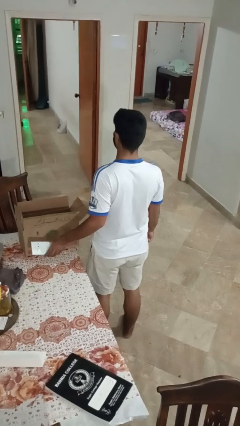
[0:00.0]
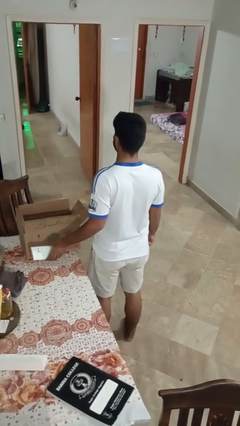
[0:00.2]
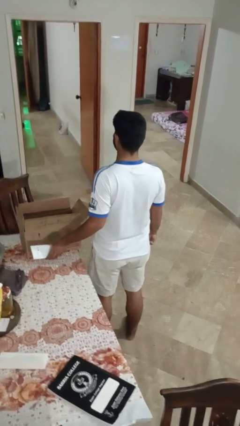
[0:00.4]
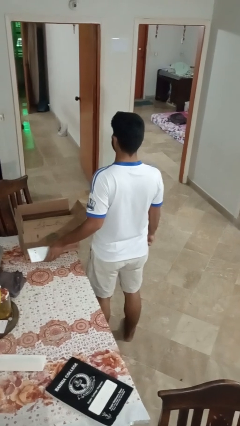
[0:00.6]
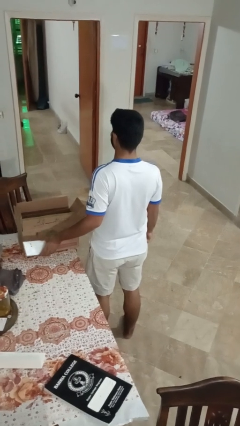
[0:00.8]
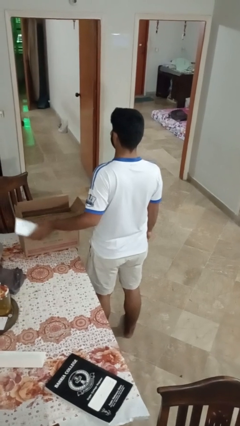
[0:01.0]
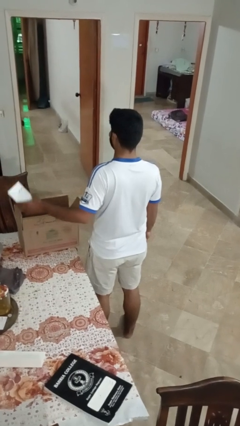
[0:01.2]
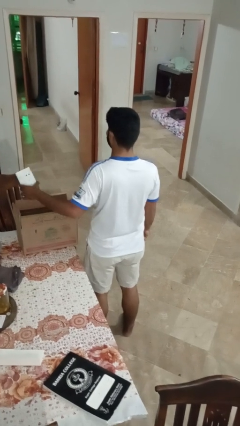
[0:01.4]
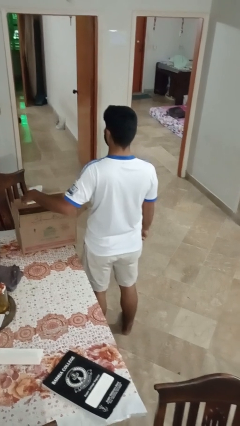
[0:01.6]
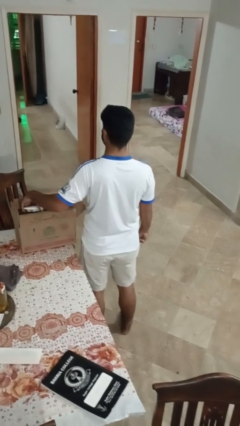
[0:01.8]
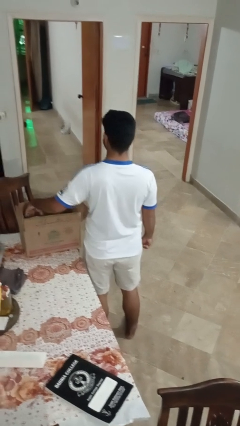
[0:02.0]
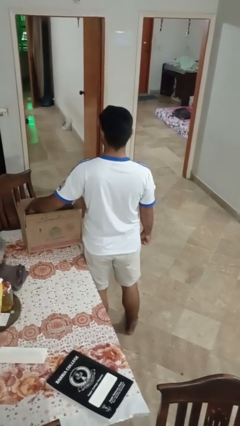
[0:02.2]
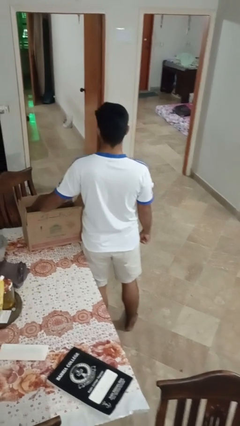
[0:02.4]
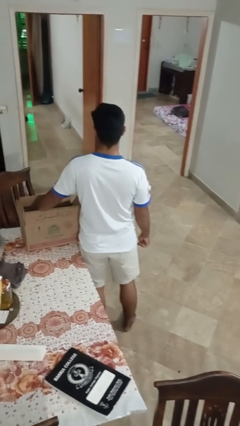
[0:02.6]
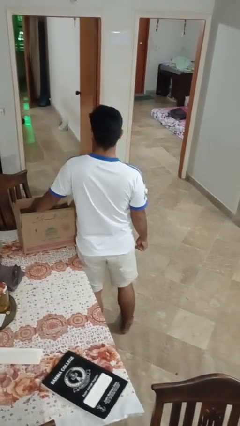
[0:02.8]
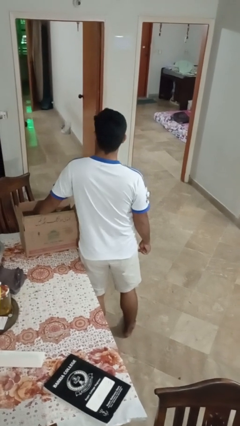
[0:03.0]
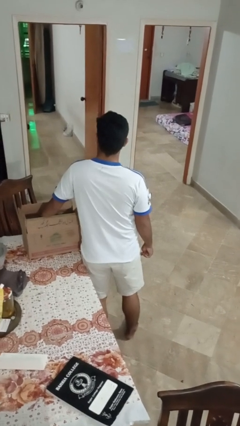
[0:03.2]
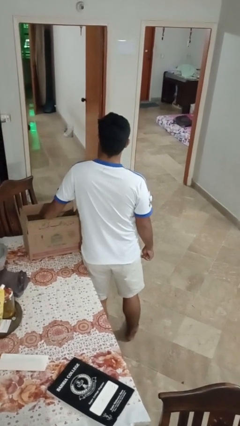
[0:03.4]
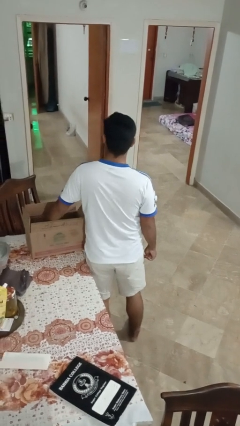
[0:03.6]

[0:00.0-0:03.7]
person puts object into box

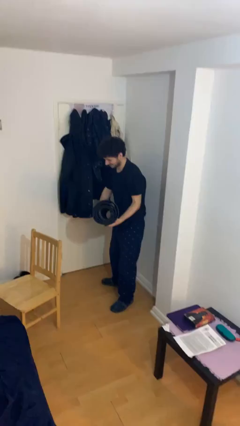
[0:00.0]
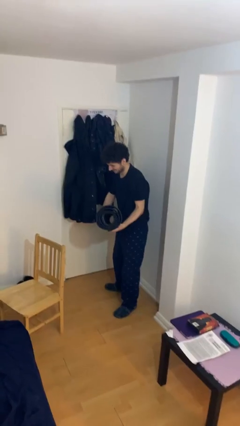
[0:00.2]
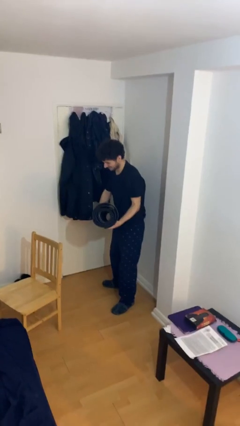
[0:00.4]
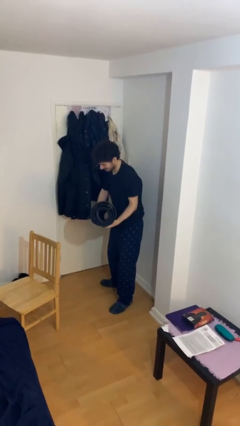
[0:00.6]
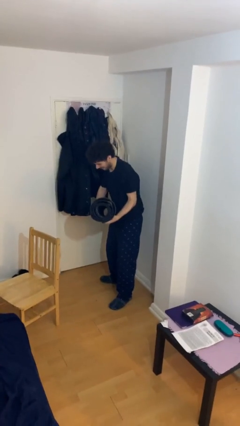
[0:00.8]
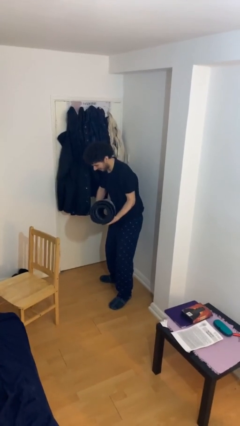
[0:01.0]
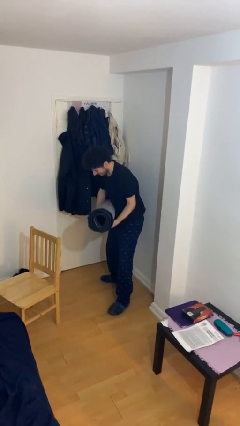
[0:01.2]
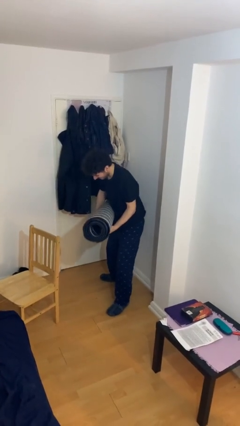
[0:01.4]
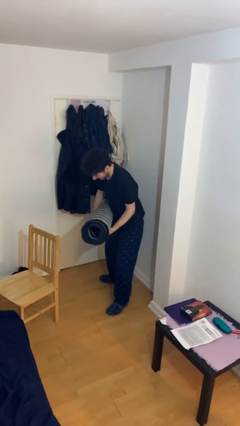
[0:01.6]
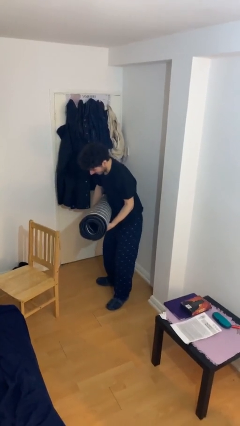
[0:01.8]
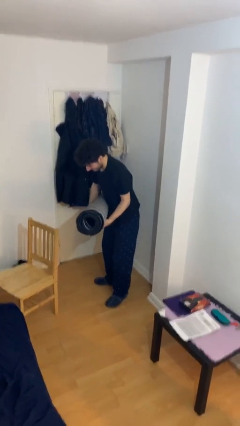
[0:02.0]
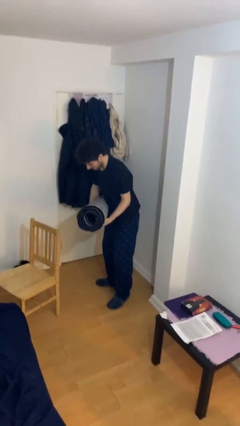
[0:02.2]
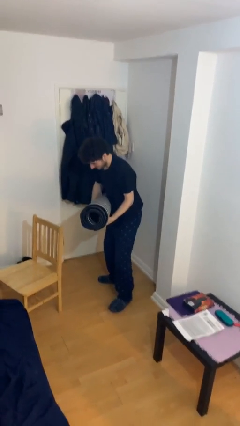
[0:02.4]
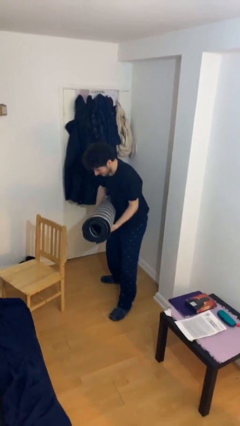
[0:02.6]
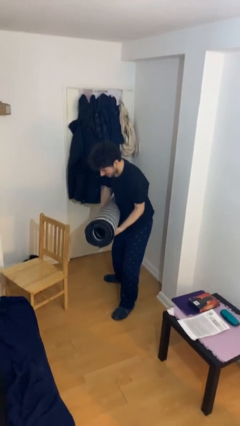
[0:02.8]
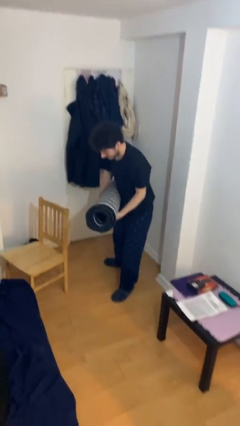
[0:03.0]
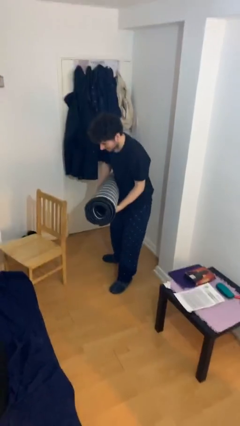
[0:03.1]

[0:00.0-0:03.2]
person carries heavy object

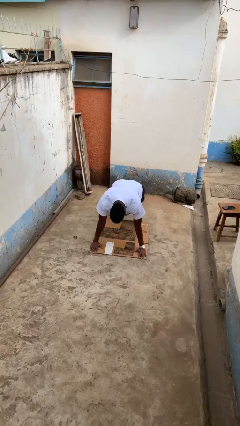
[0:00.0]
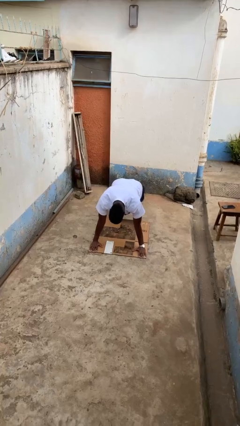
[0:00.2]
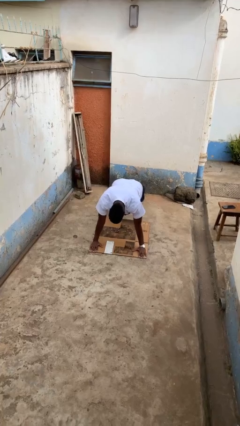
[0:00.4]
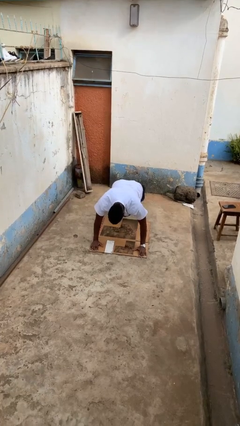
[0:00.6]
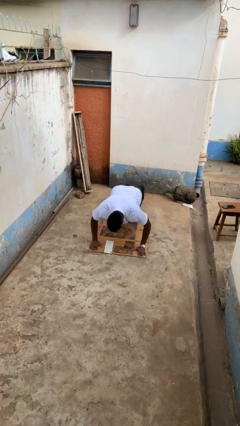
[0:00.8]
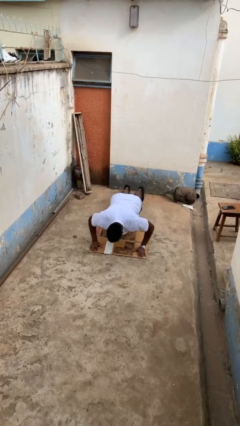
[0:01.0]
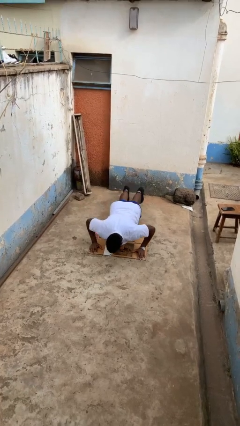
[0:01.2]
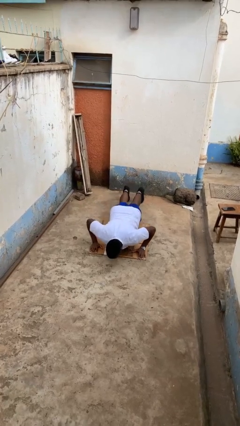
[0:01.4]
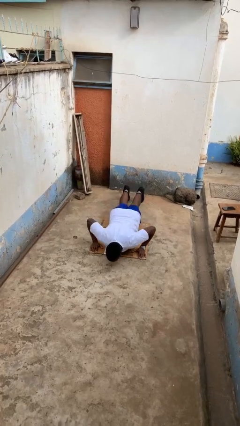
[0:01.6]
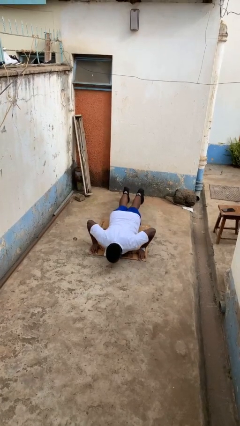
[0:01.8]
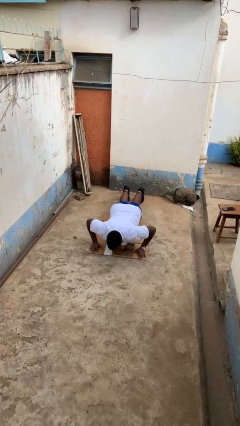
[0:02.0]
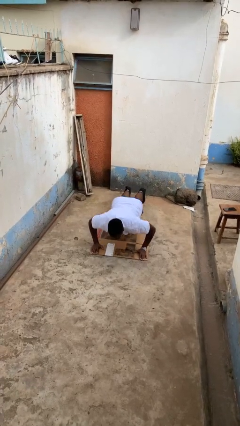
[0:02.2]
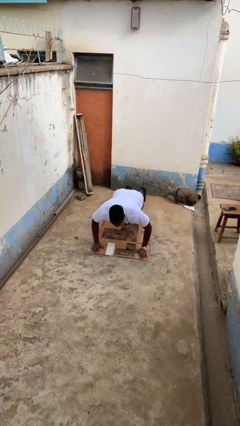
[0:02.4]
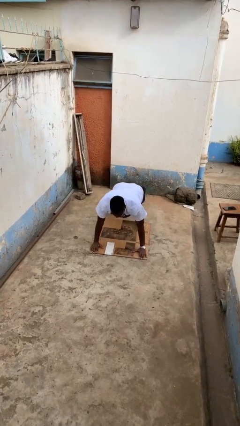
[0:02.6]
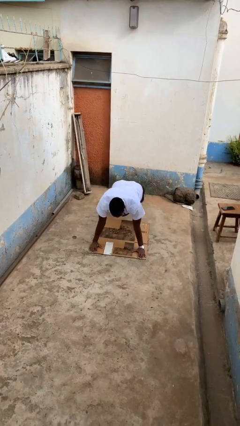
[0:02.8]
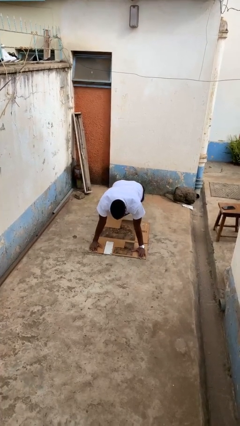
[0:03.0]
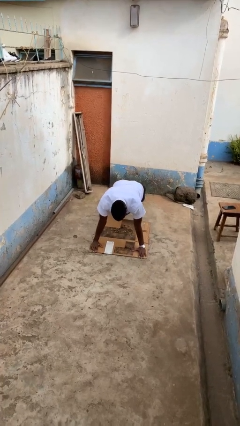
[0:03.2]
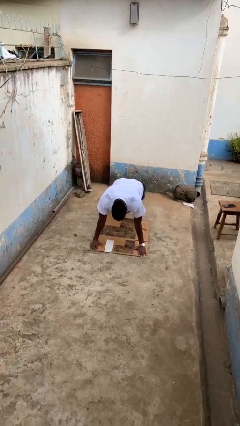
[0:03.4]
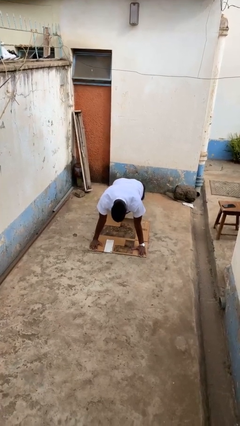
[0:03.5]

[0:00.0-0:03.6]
person exercises with pushup

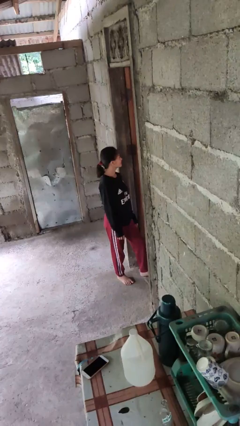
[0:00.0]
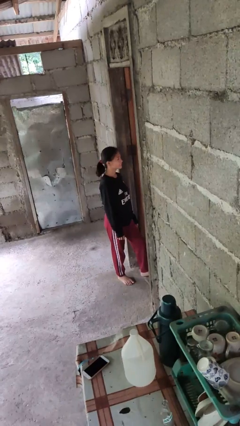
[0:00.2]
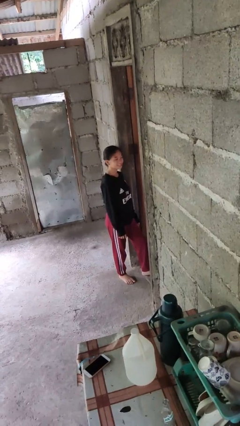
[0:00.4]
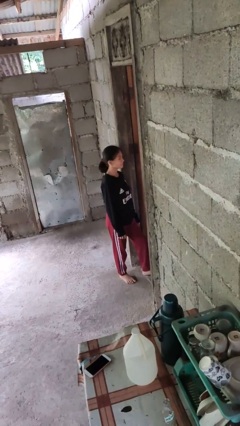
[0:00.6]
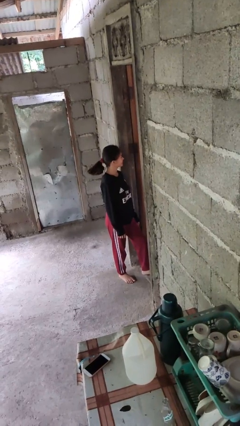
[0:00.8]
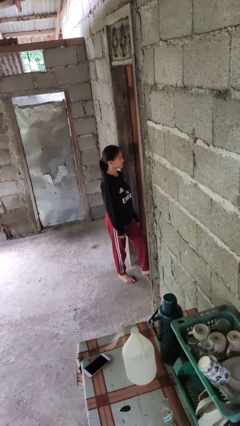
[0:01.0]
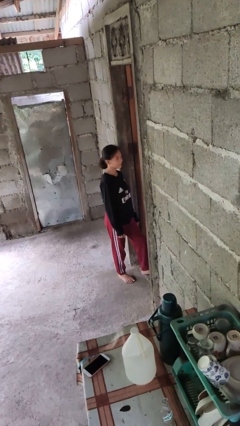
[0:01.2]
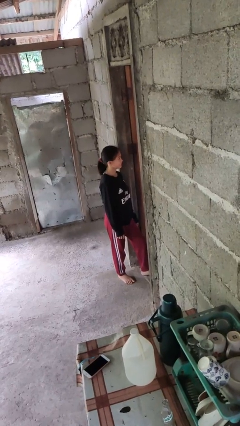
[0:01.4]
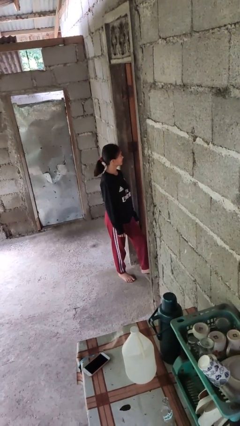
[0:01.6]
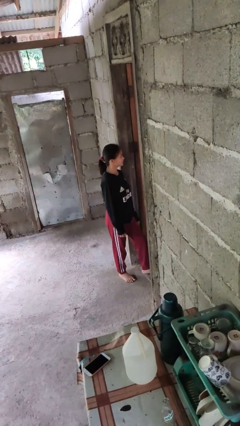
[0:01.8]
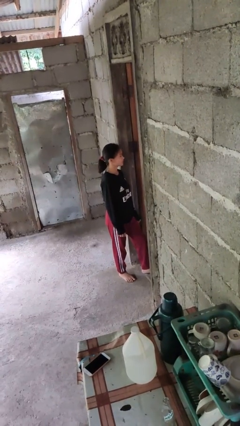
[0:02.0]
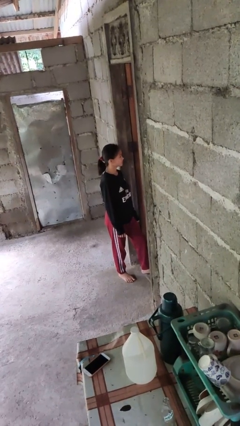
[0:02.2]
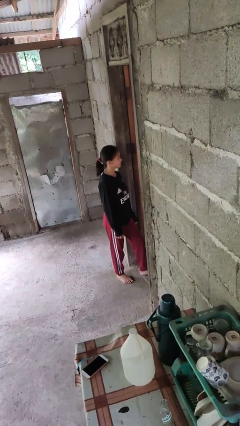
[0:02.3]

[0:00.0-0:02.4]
person shakes head

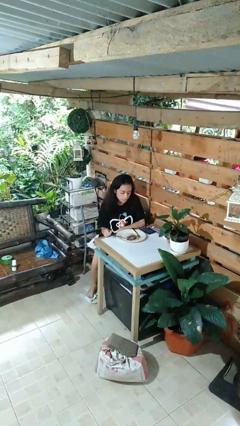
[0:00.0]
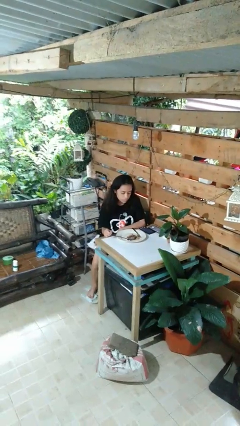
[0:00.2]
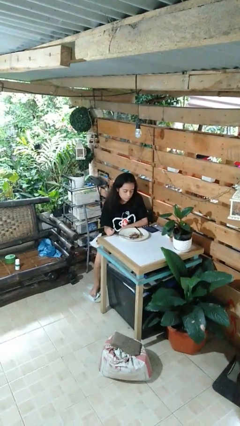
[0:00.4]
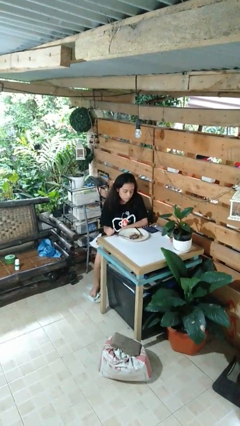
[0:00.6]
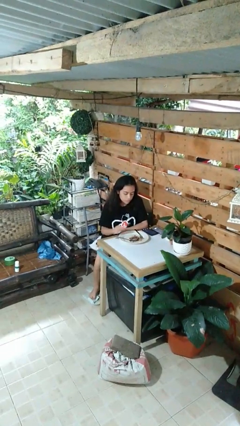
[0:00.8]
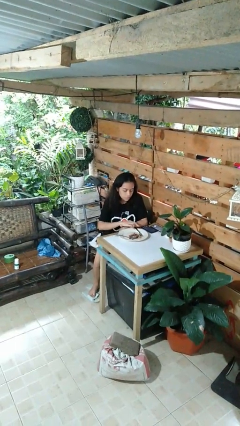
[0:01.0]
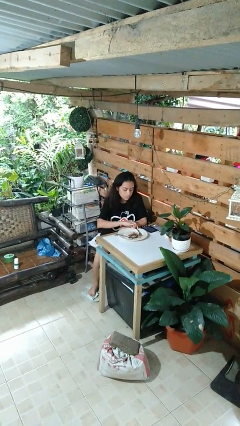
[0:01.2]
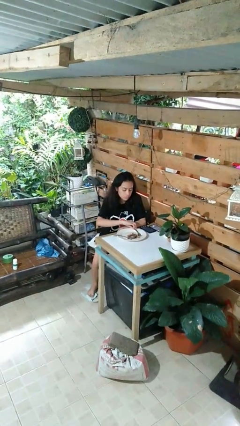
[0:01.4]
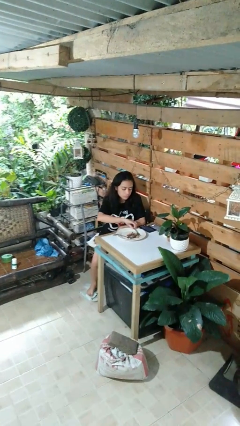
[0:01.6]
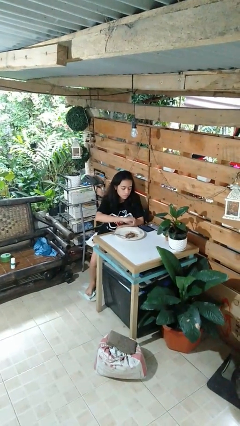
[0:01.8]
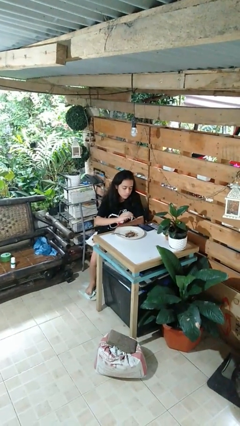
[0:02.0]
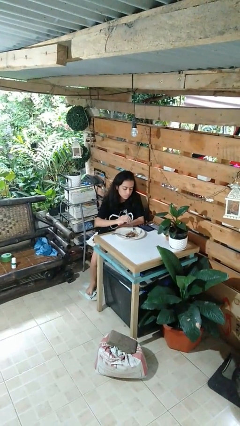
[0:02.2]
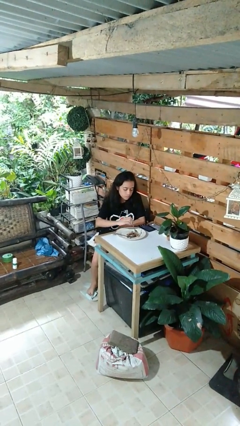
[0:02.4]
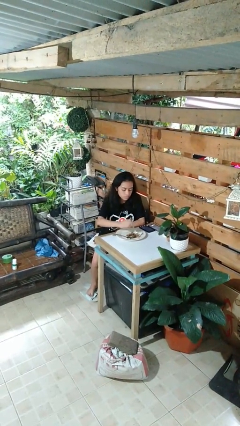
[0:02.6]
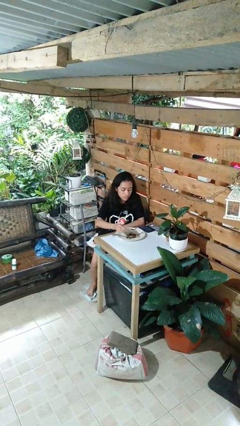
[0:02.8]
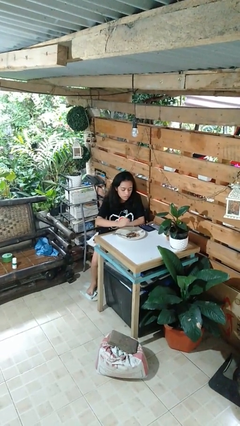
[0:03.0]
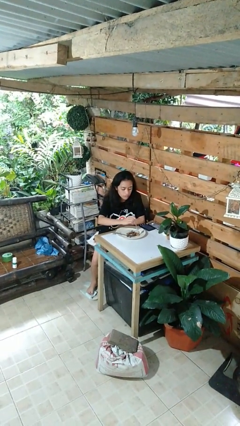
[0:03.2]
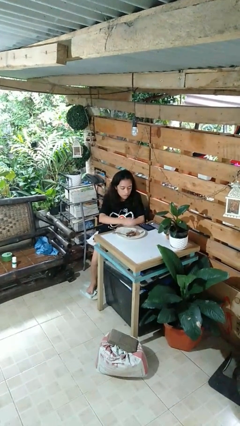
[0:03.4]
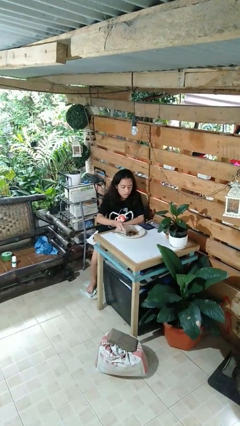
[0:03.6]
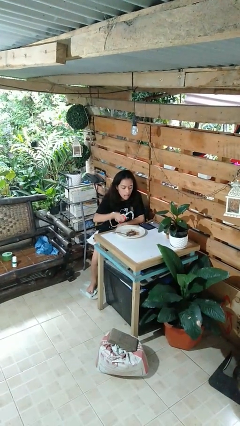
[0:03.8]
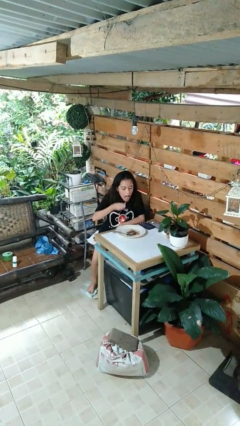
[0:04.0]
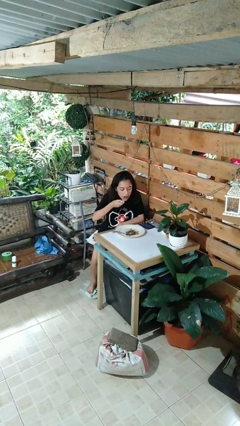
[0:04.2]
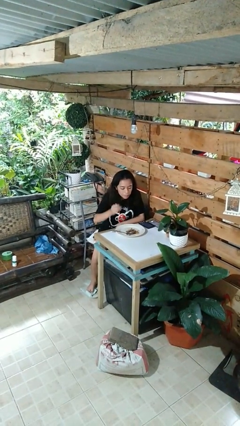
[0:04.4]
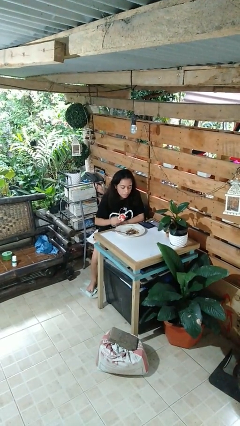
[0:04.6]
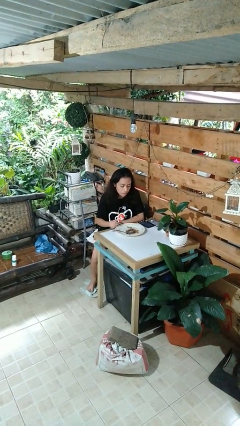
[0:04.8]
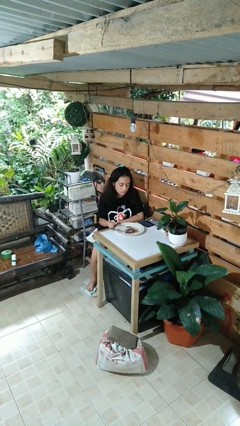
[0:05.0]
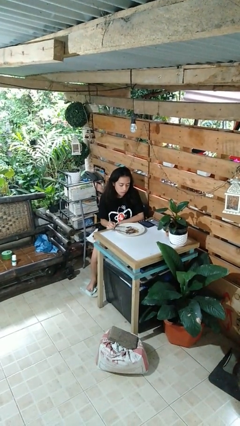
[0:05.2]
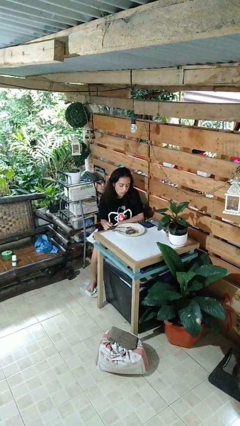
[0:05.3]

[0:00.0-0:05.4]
person eats with utensil
